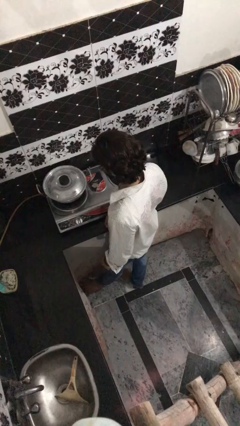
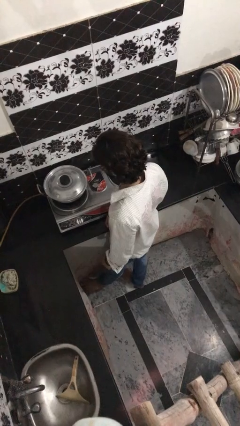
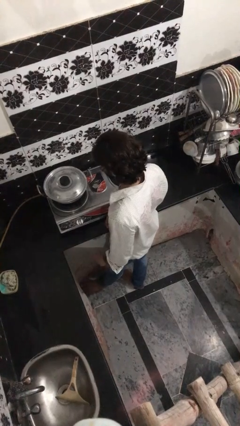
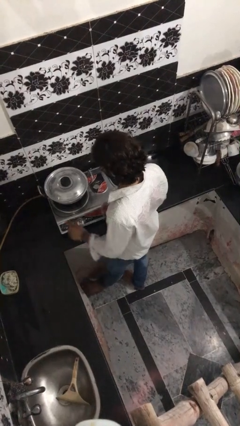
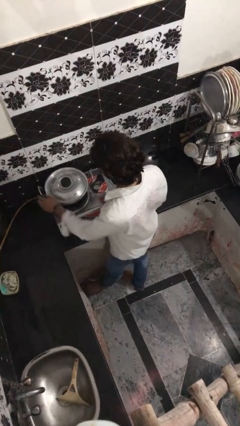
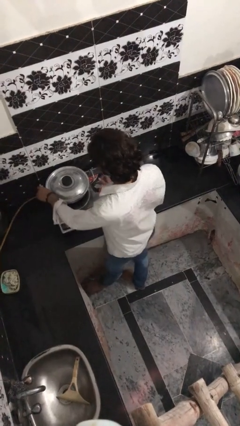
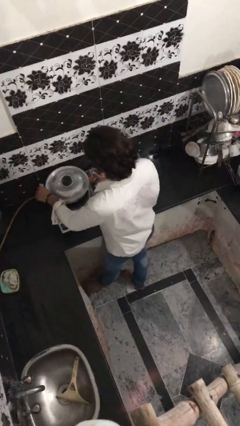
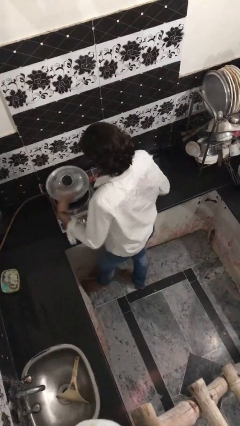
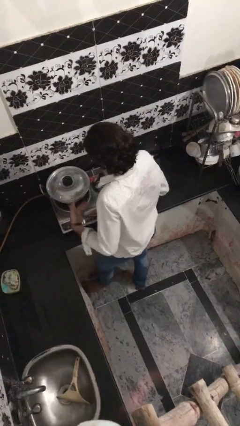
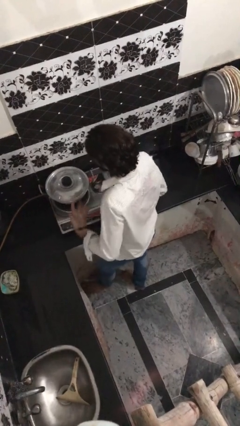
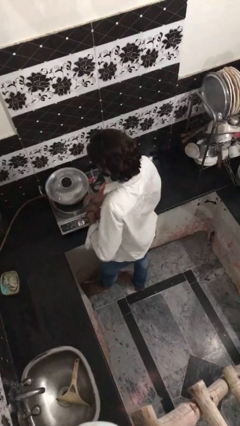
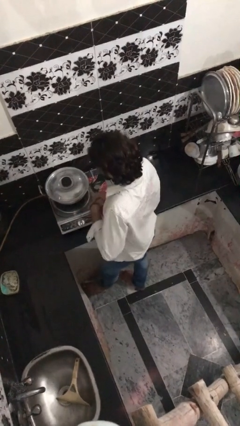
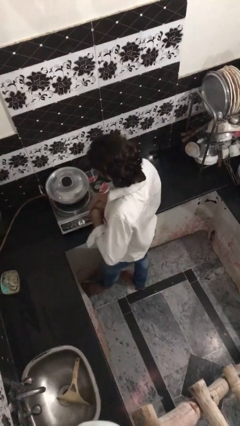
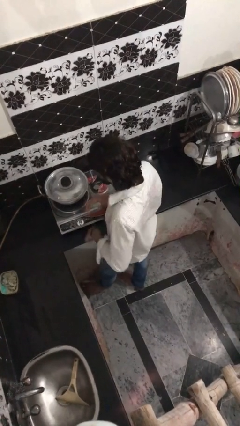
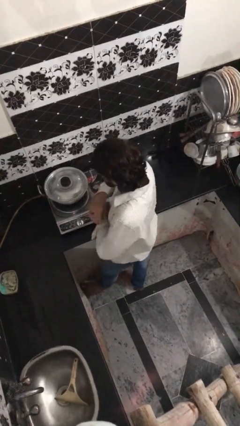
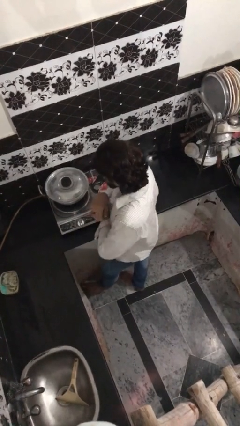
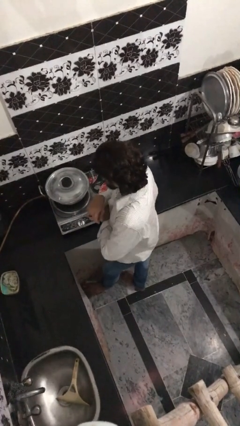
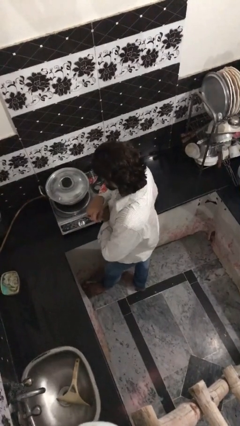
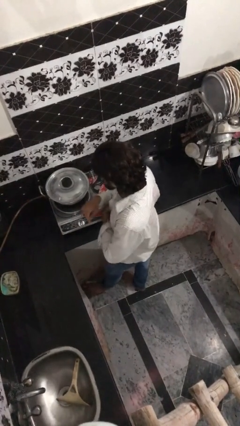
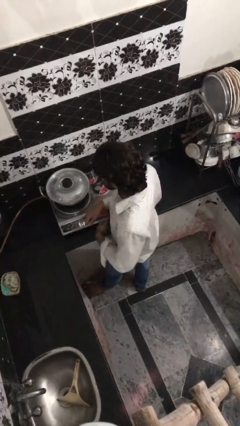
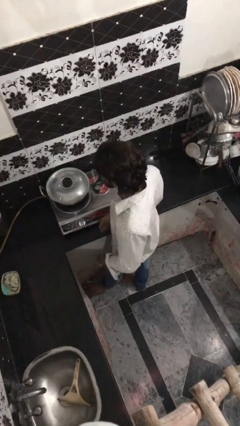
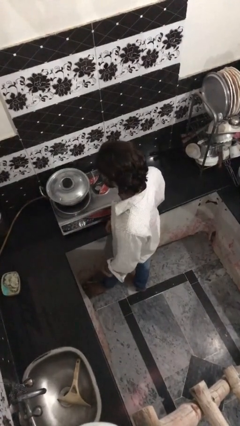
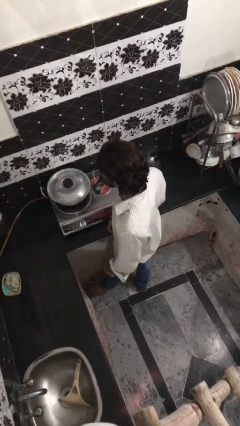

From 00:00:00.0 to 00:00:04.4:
person burns hand

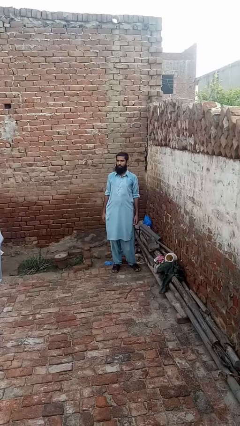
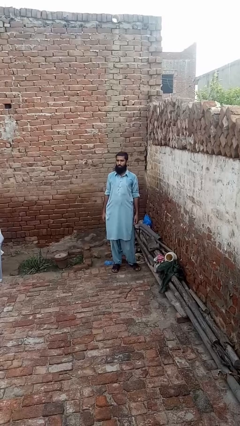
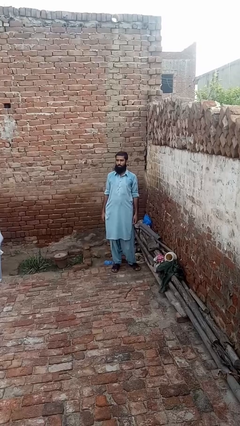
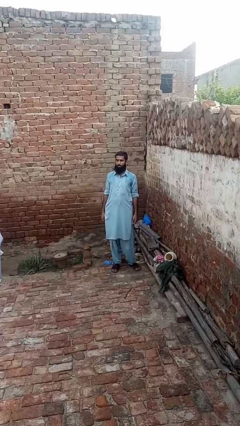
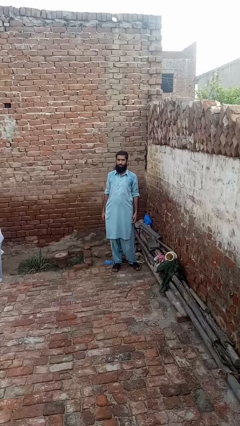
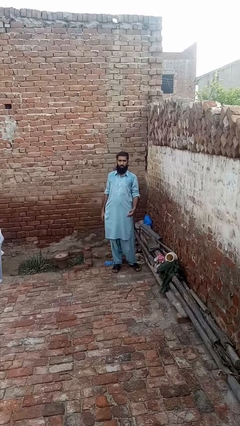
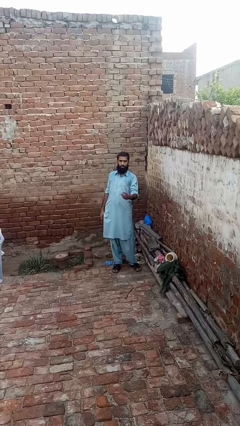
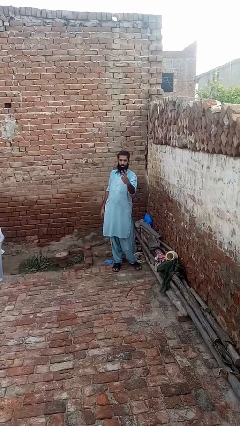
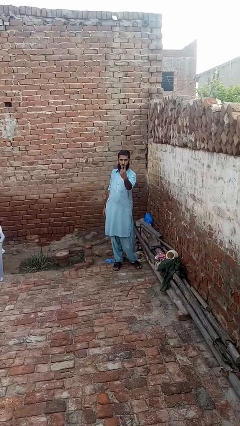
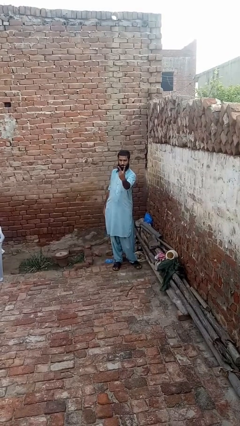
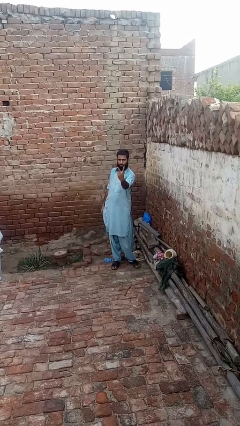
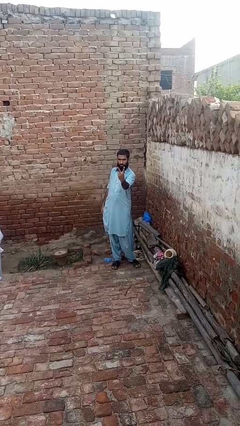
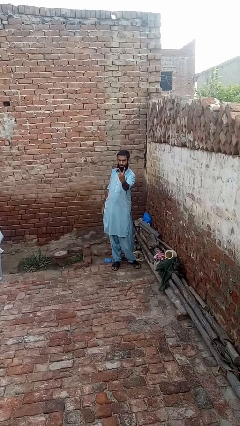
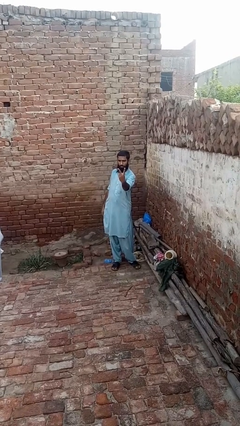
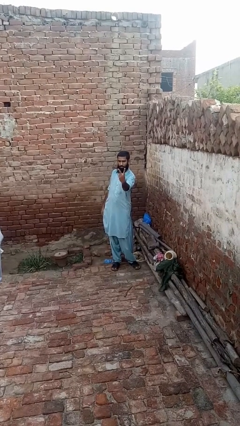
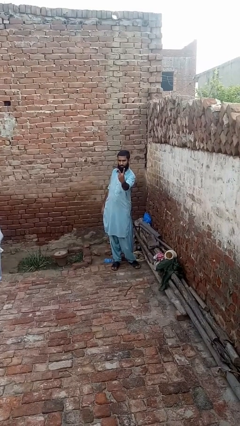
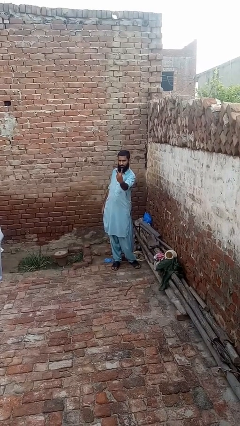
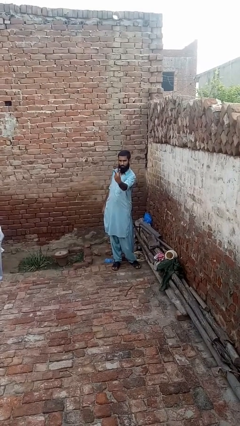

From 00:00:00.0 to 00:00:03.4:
person gestures peace

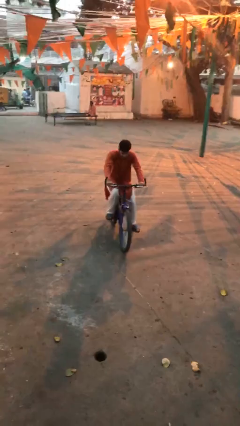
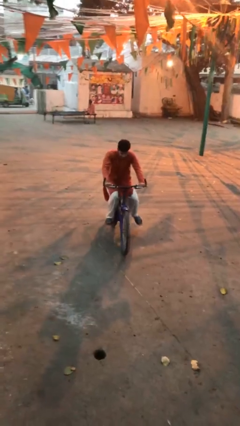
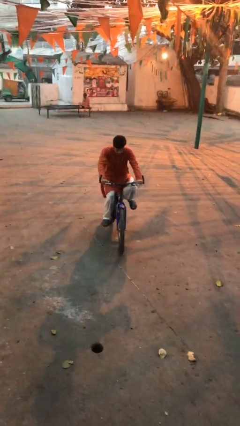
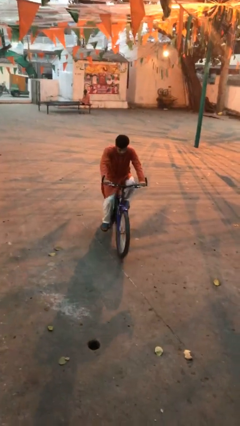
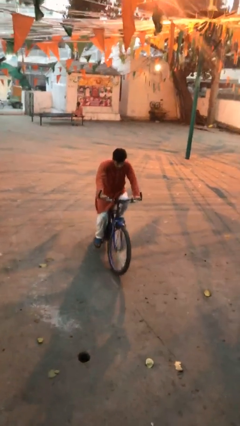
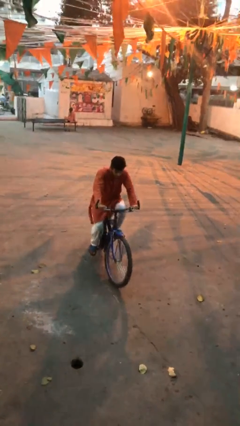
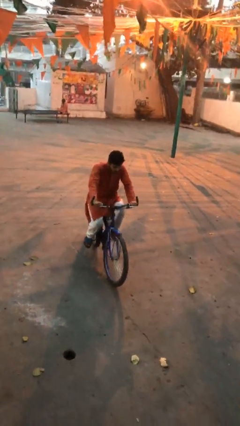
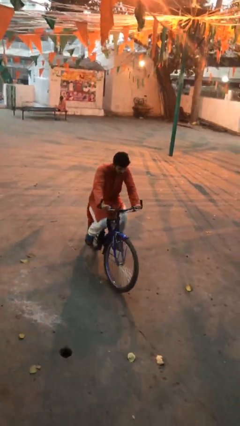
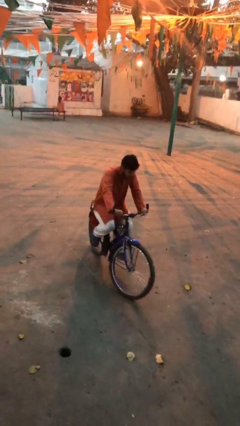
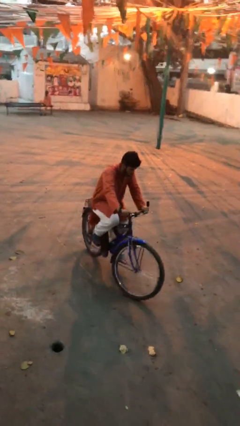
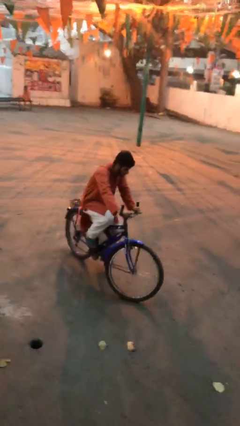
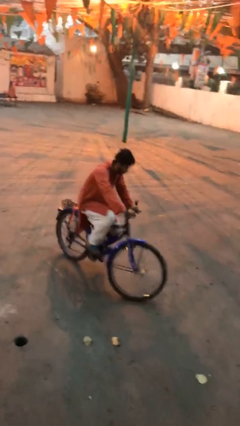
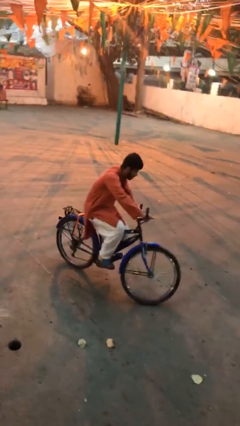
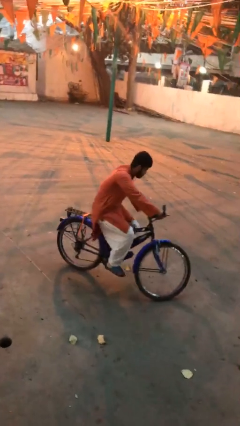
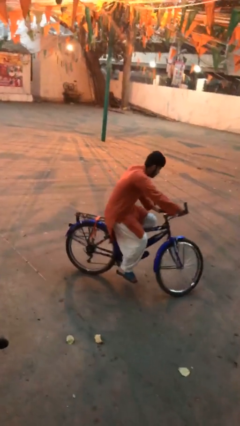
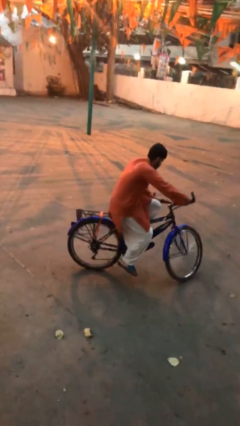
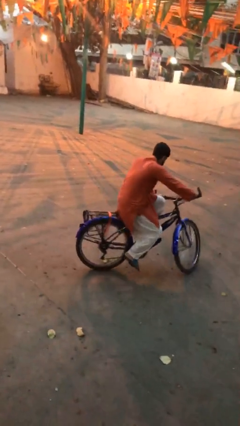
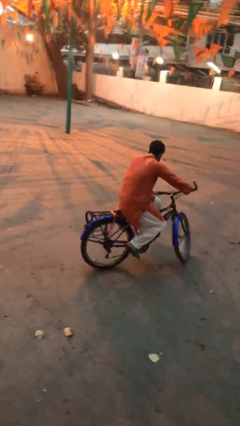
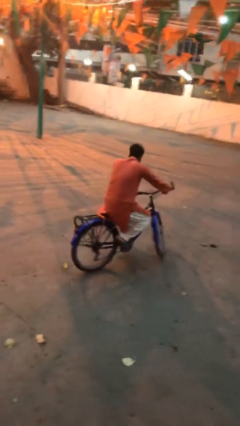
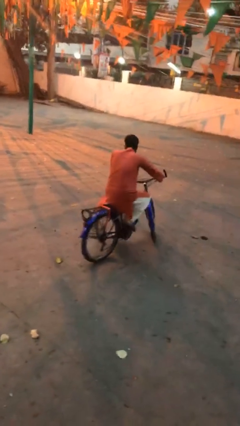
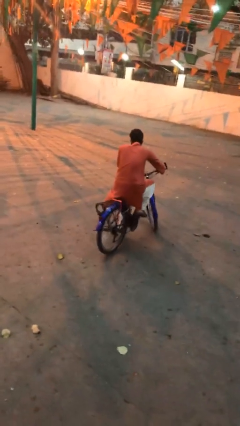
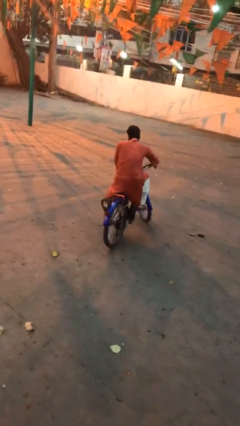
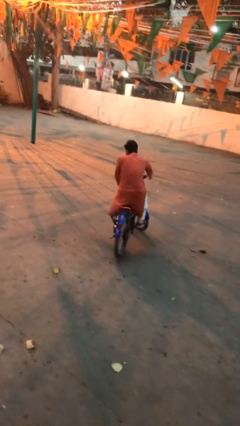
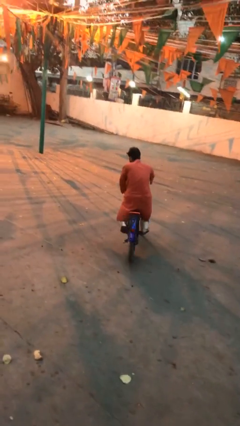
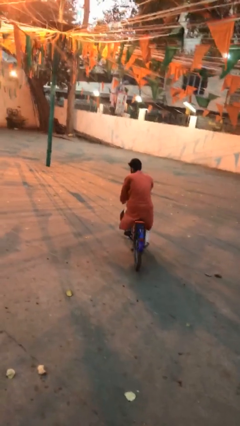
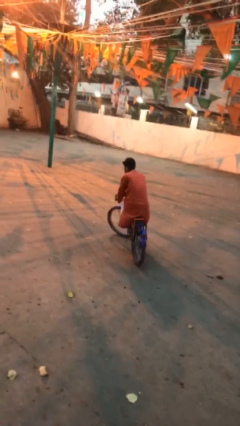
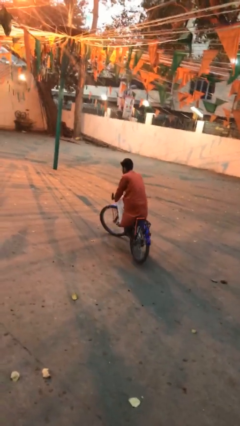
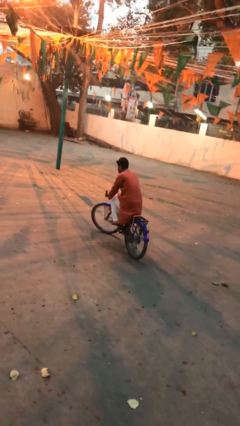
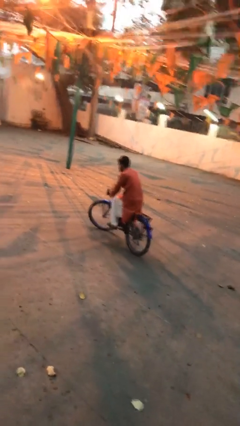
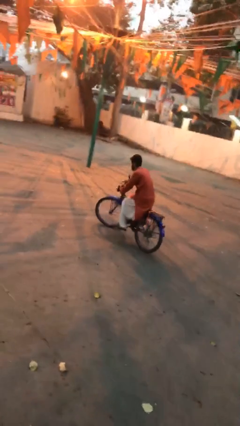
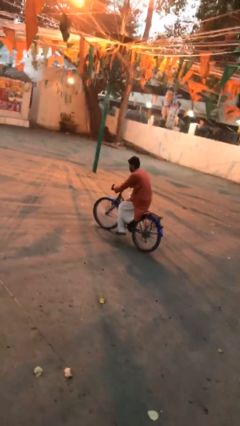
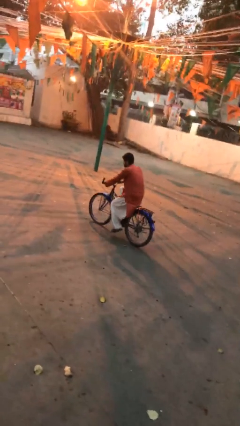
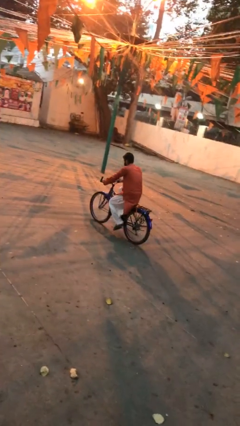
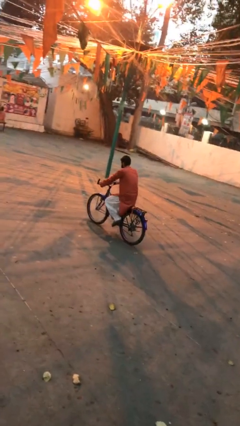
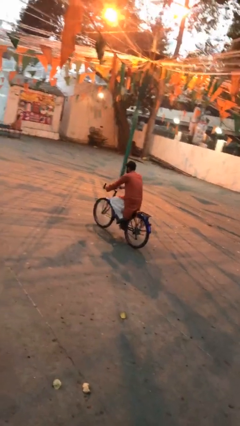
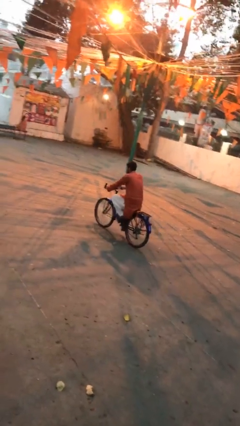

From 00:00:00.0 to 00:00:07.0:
person rides bicycle

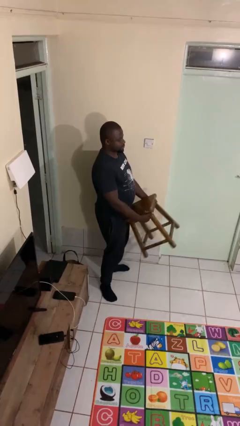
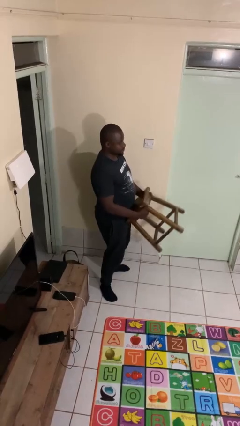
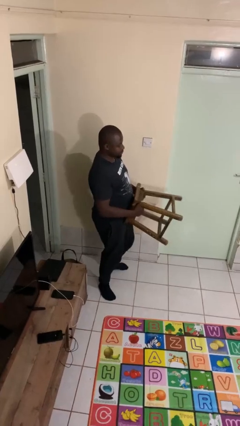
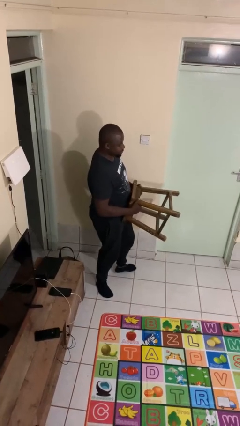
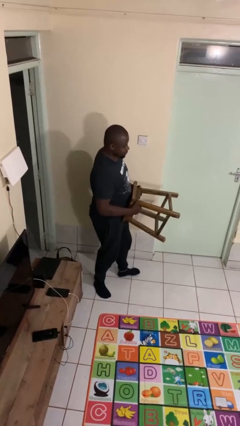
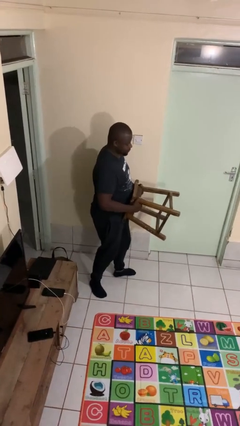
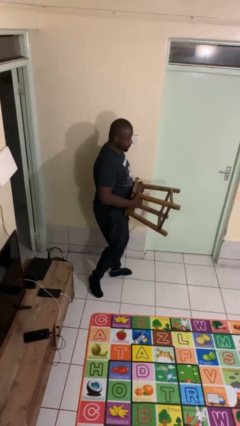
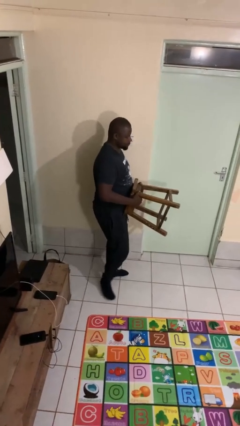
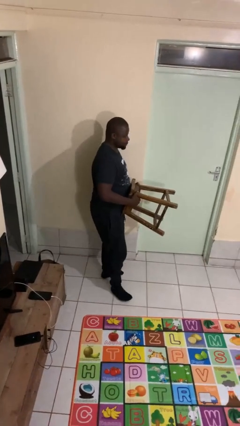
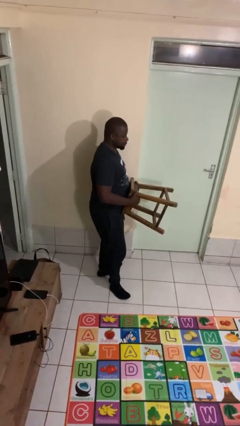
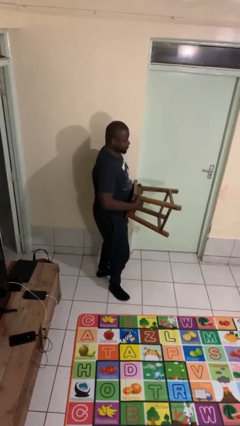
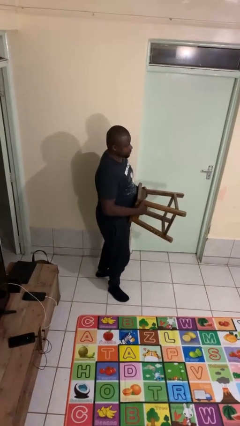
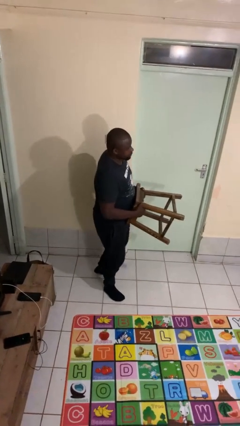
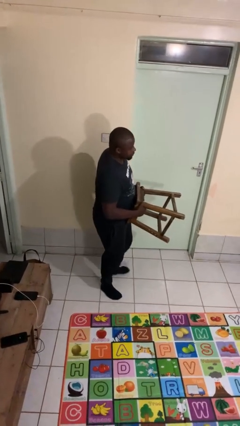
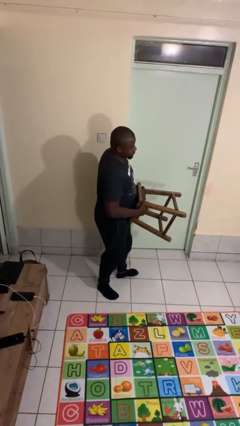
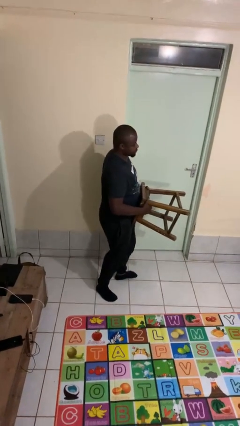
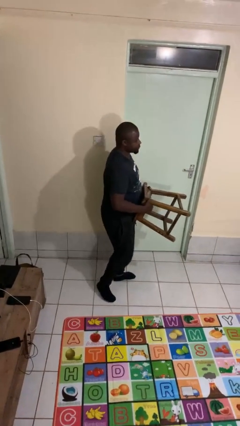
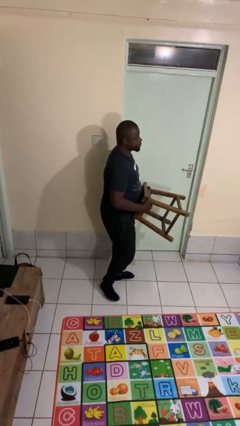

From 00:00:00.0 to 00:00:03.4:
person carries furniture
